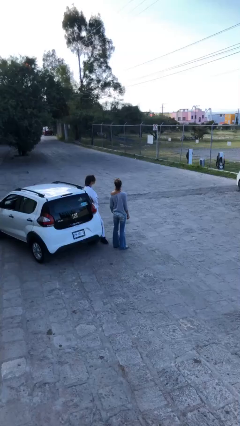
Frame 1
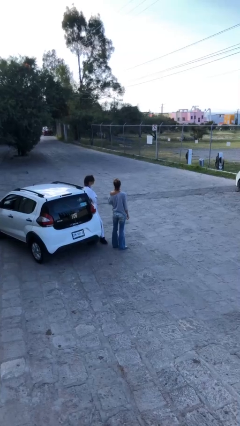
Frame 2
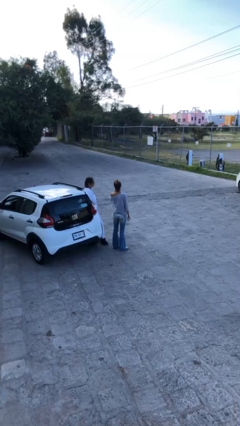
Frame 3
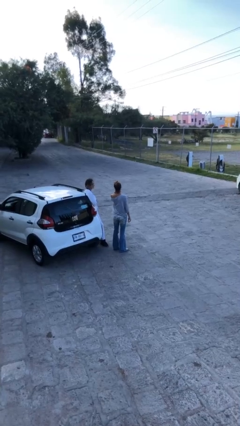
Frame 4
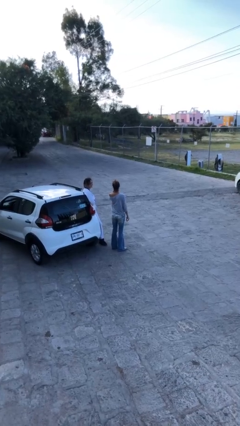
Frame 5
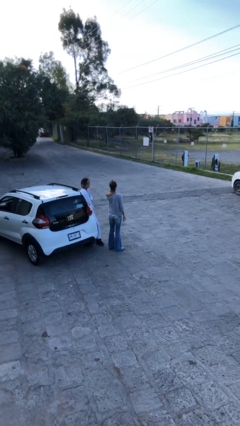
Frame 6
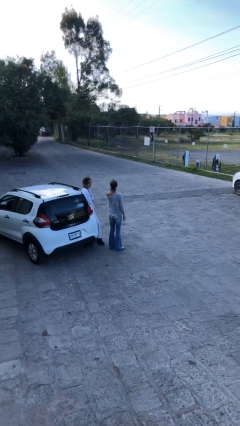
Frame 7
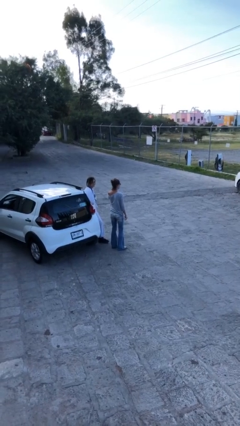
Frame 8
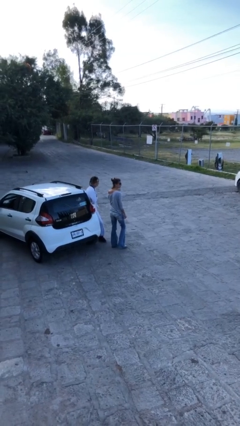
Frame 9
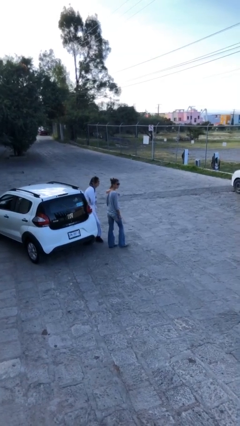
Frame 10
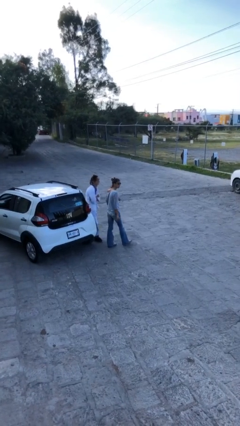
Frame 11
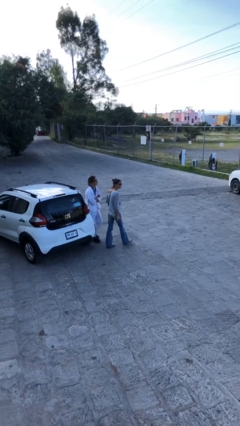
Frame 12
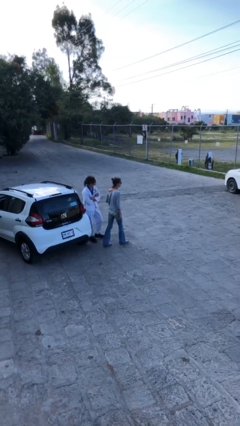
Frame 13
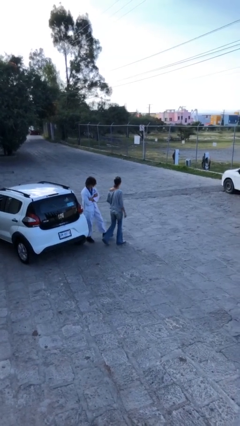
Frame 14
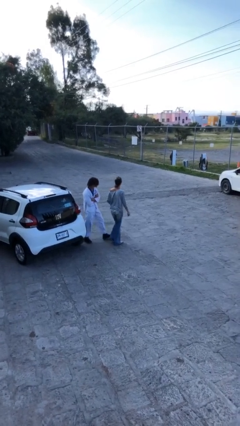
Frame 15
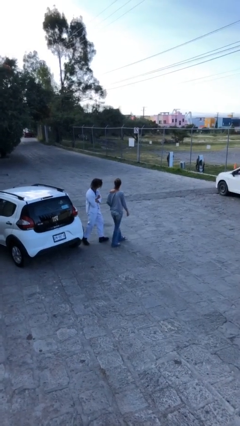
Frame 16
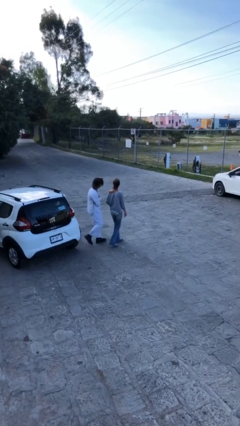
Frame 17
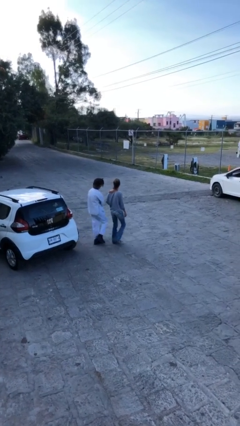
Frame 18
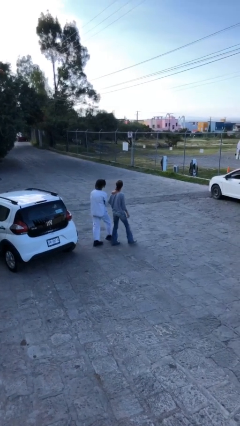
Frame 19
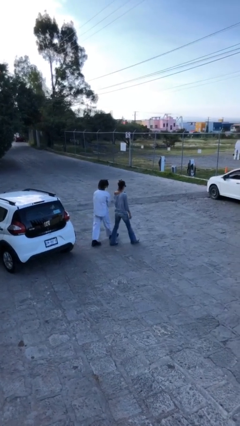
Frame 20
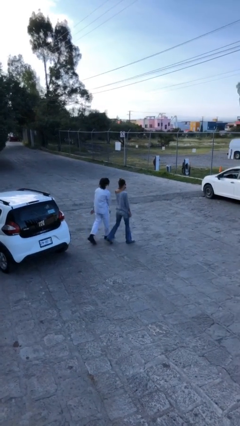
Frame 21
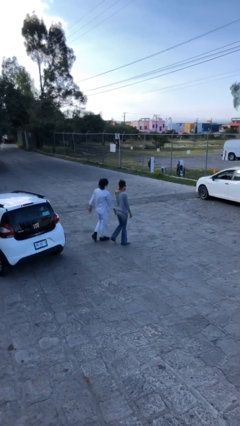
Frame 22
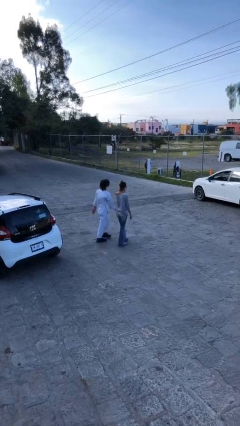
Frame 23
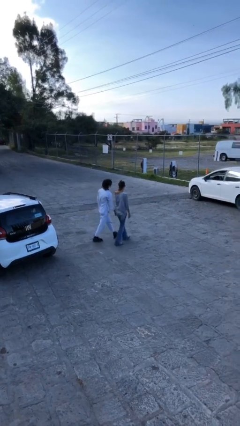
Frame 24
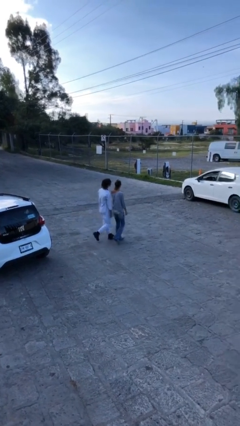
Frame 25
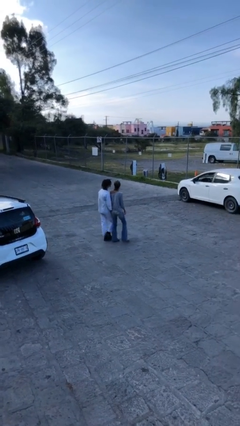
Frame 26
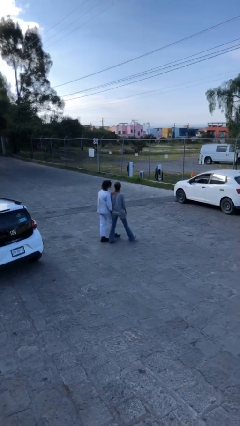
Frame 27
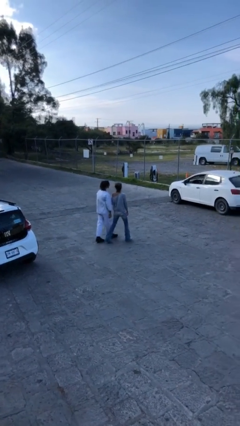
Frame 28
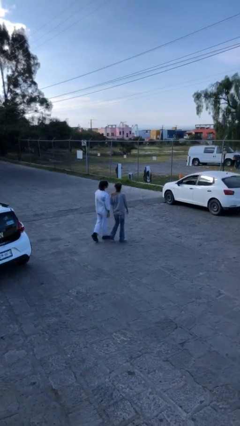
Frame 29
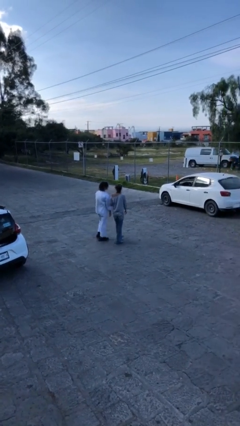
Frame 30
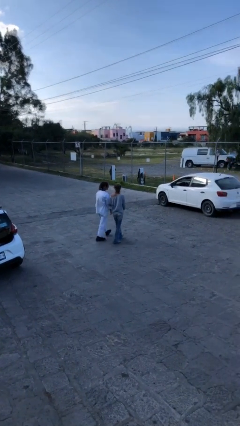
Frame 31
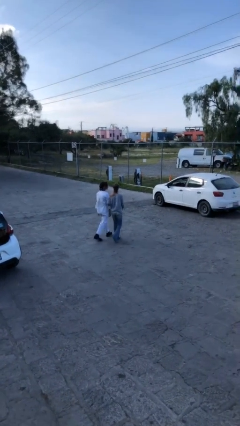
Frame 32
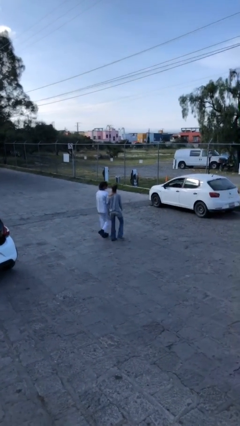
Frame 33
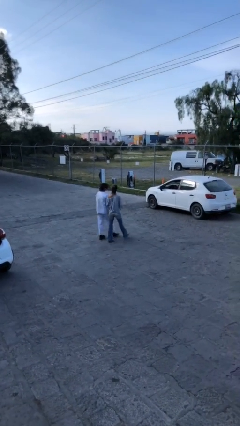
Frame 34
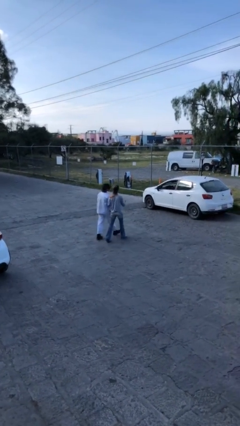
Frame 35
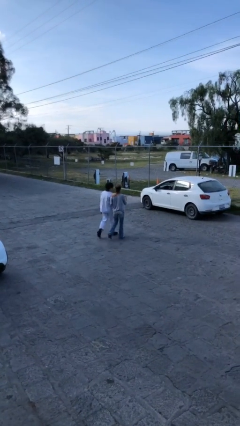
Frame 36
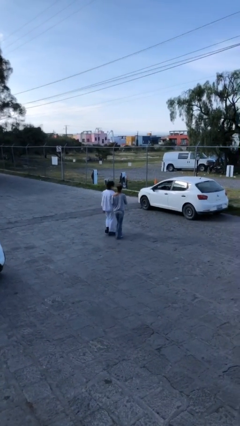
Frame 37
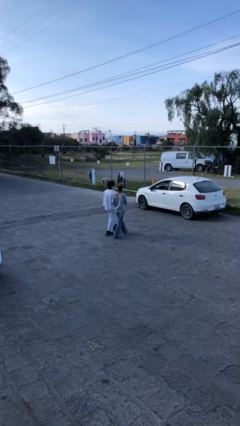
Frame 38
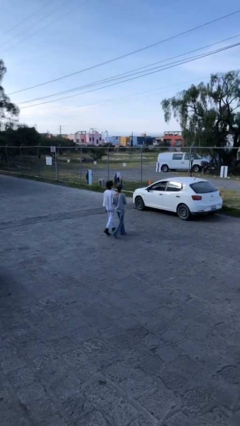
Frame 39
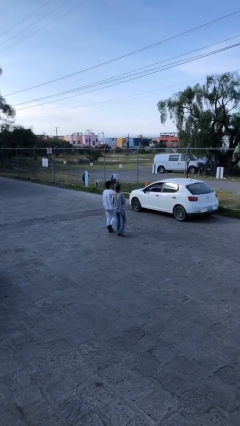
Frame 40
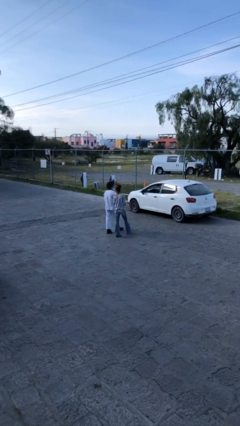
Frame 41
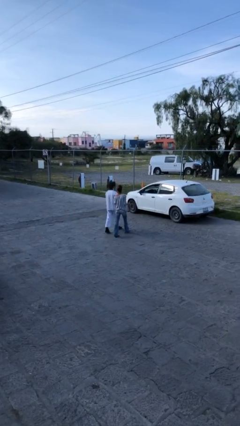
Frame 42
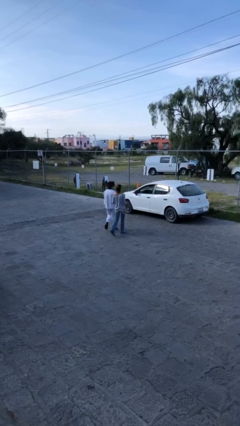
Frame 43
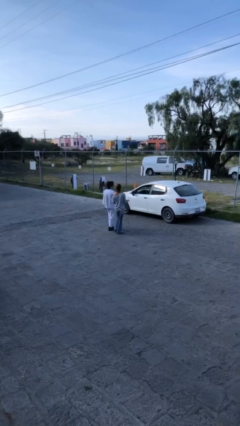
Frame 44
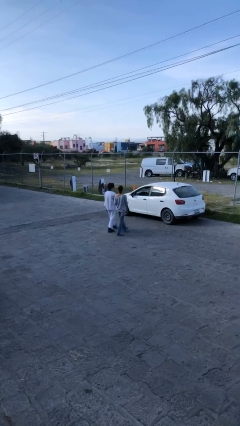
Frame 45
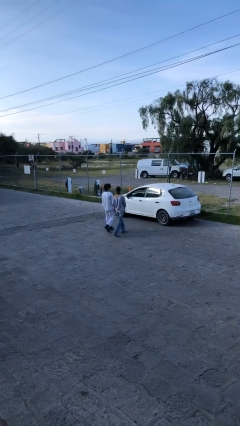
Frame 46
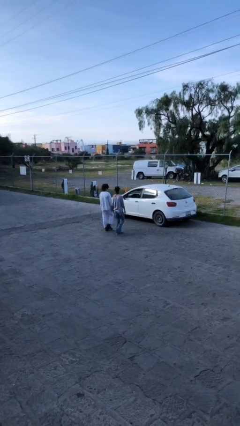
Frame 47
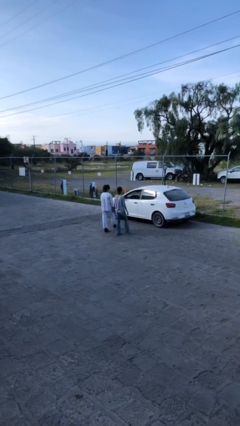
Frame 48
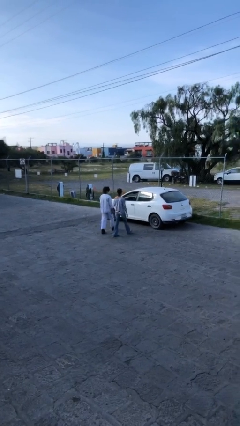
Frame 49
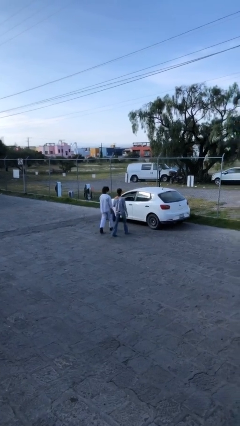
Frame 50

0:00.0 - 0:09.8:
person talks to person

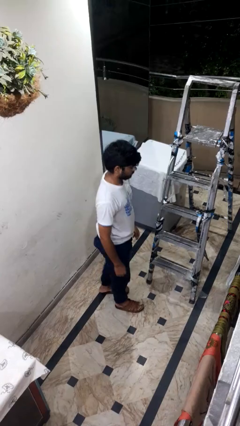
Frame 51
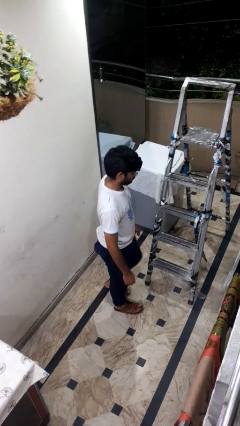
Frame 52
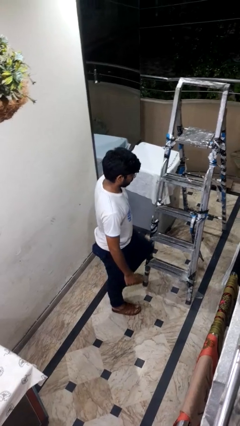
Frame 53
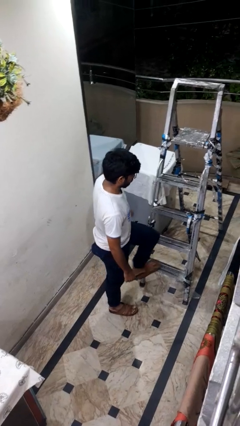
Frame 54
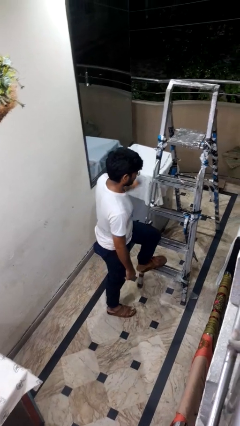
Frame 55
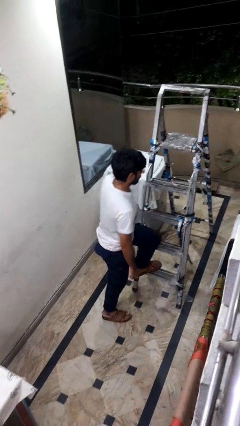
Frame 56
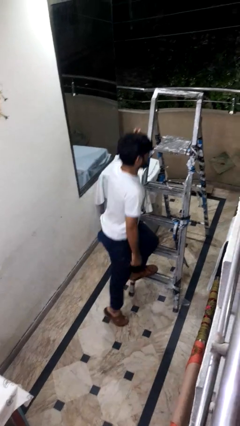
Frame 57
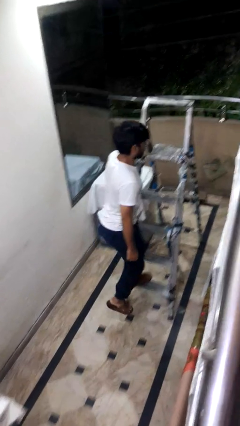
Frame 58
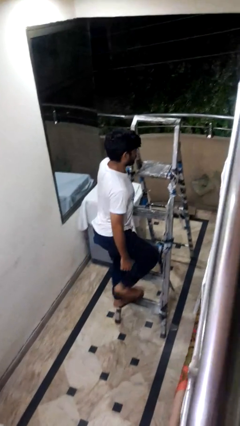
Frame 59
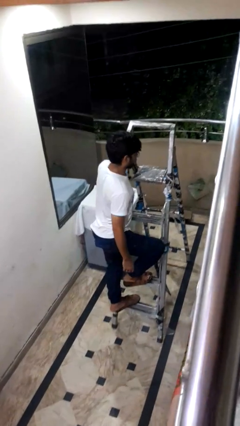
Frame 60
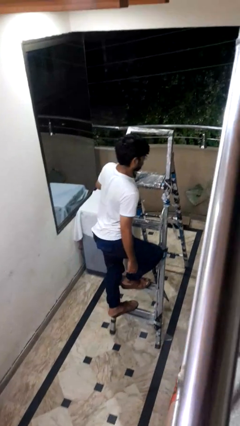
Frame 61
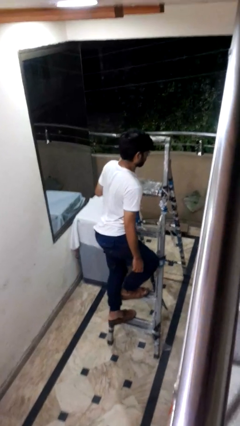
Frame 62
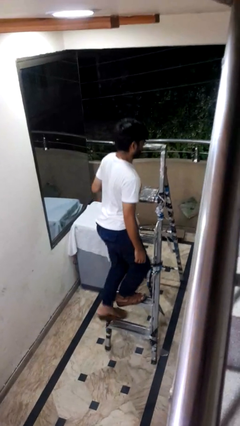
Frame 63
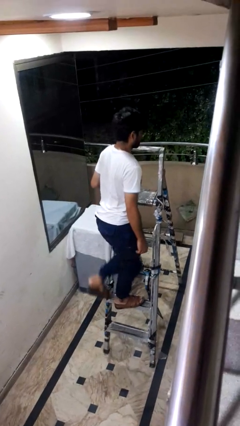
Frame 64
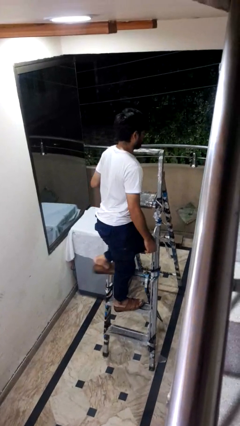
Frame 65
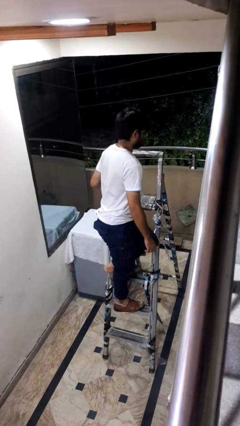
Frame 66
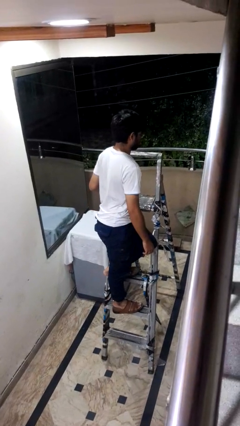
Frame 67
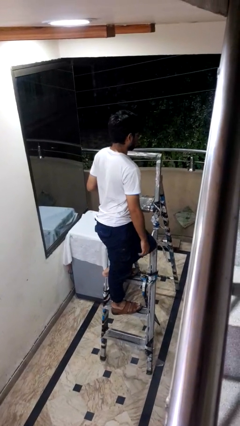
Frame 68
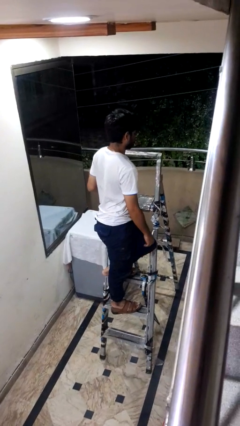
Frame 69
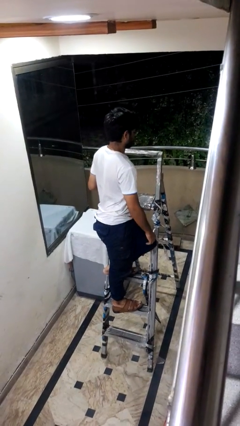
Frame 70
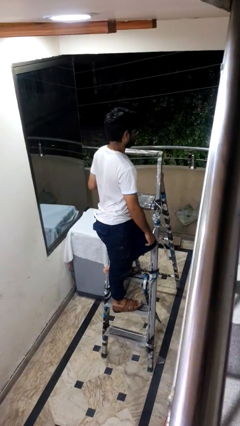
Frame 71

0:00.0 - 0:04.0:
person climbs up ladder

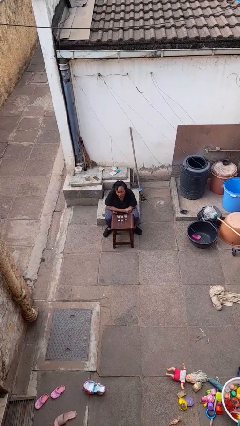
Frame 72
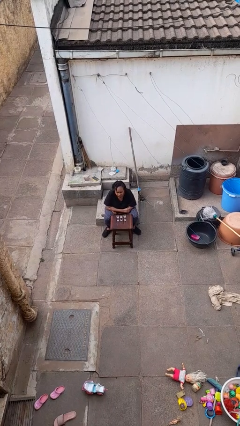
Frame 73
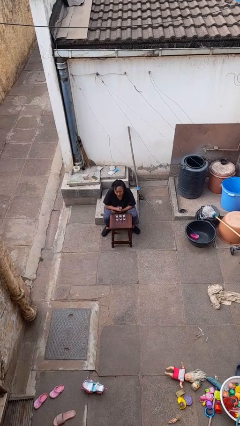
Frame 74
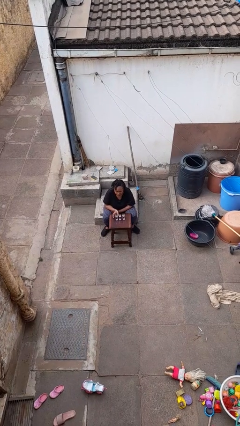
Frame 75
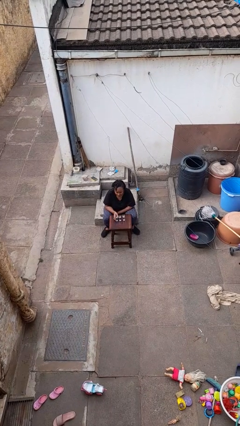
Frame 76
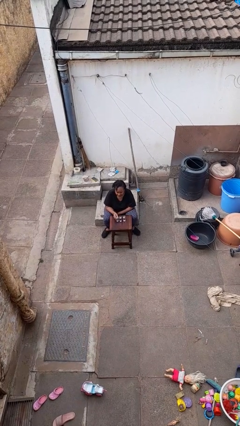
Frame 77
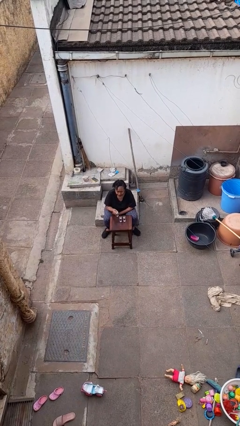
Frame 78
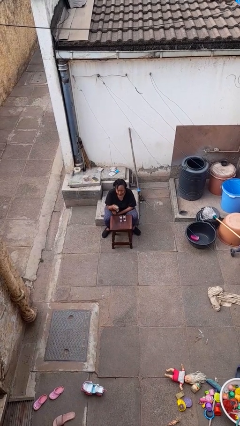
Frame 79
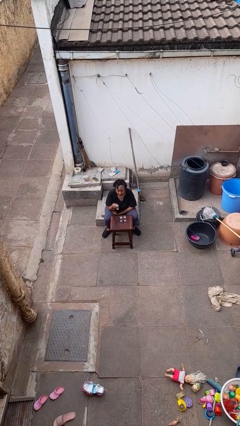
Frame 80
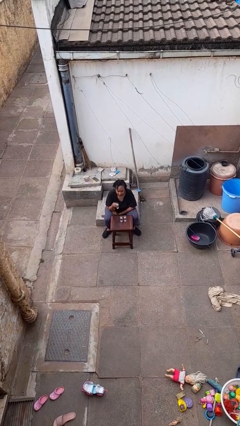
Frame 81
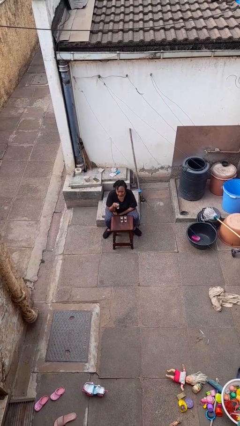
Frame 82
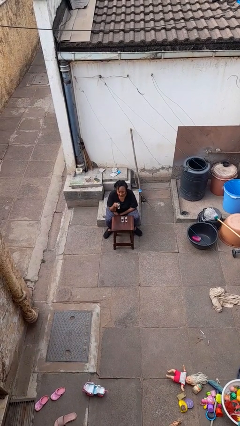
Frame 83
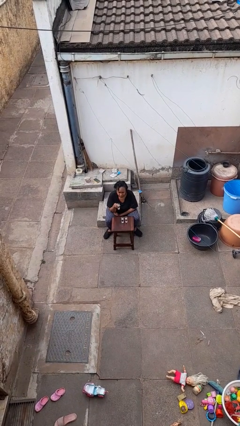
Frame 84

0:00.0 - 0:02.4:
person picks up object from table

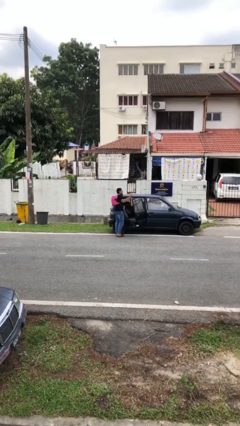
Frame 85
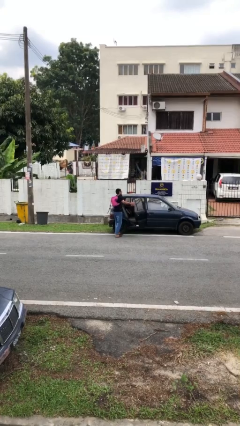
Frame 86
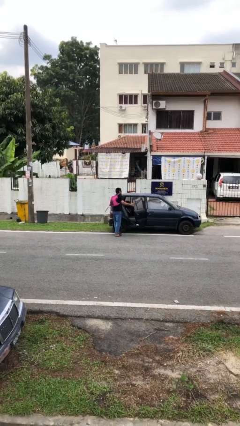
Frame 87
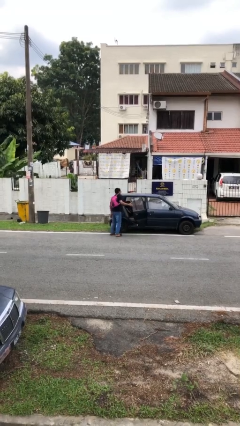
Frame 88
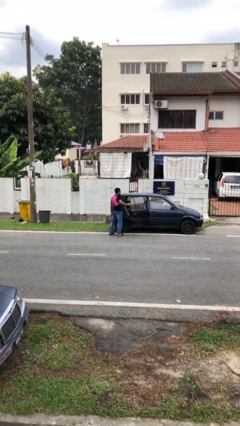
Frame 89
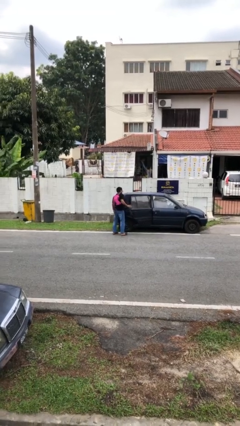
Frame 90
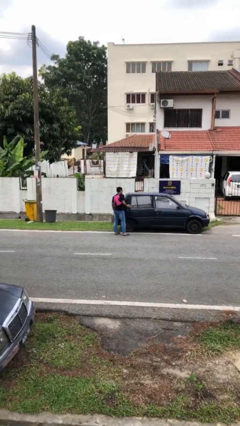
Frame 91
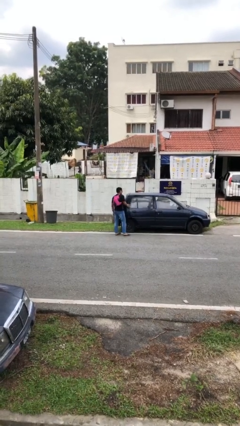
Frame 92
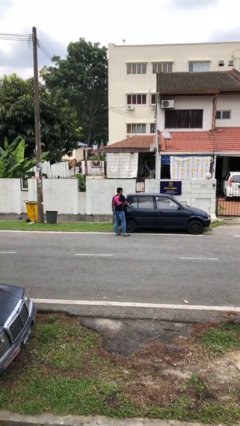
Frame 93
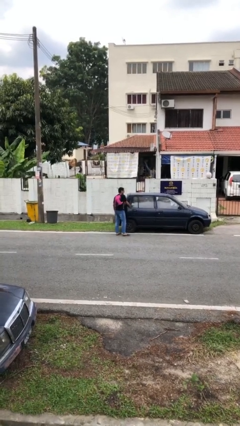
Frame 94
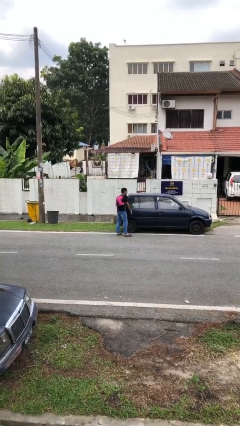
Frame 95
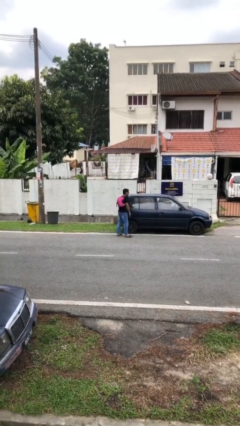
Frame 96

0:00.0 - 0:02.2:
person closes car door
